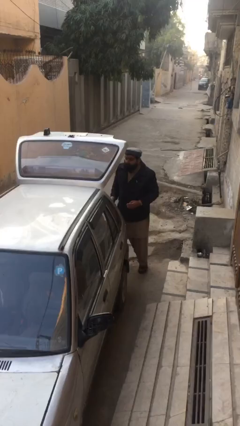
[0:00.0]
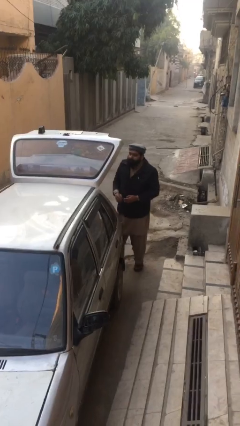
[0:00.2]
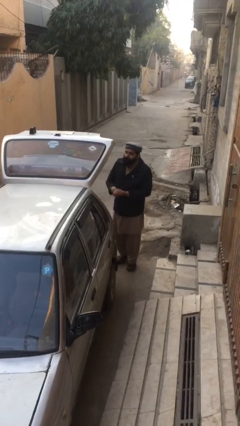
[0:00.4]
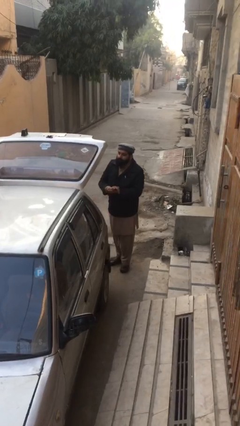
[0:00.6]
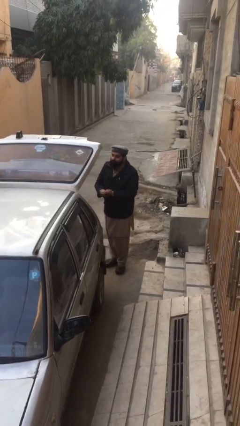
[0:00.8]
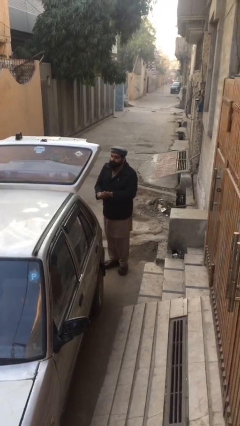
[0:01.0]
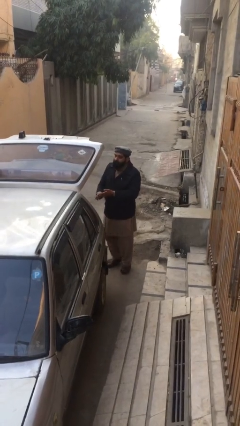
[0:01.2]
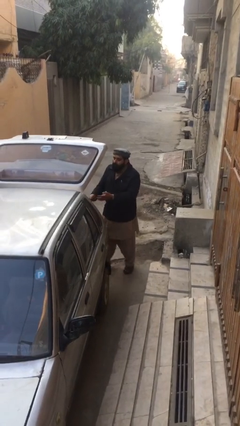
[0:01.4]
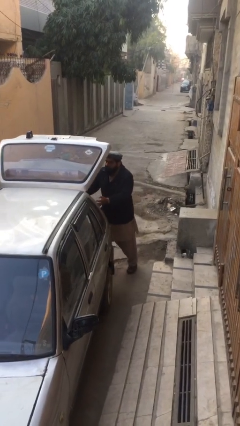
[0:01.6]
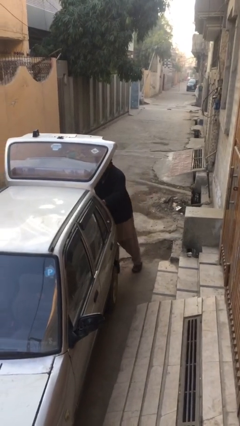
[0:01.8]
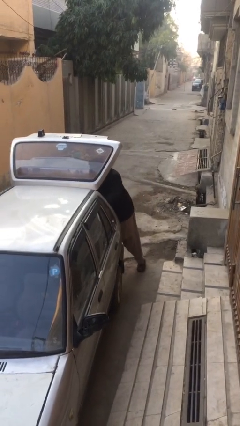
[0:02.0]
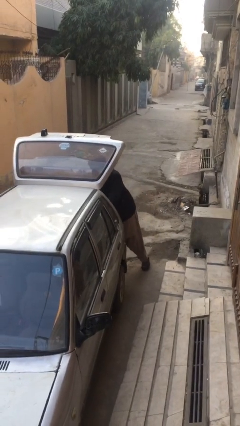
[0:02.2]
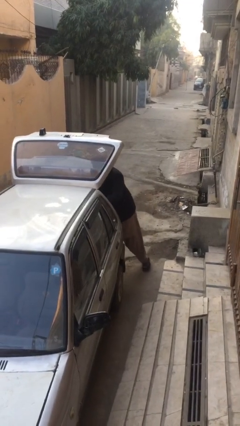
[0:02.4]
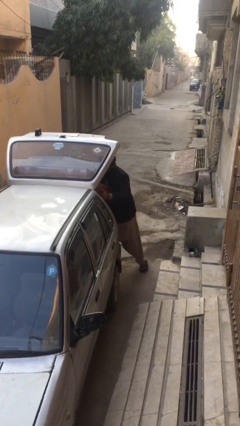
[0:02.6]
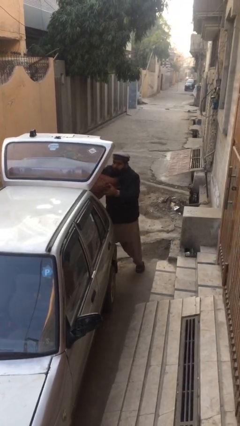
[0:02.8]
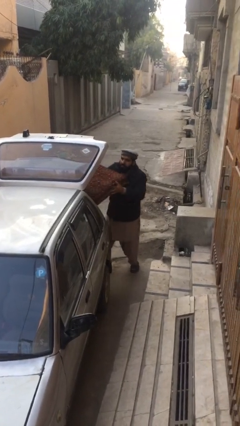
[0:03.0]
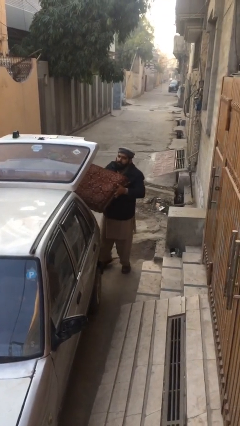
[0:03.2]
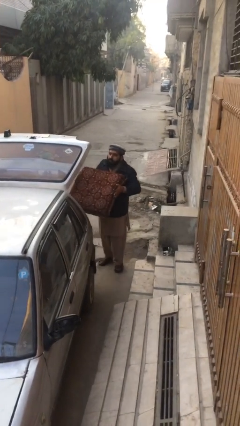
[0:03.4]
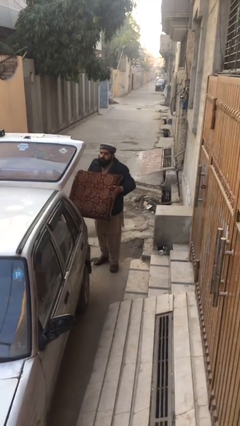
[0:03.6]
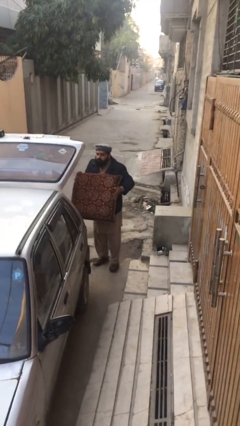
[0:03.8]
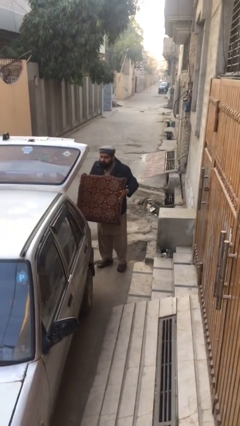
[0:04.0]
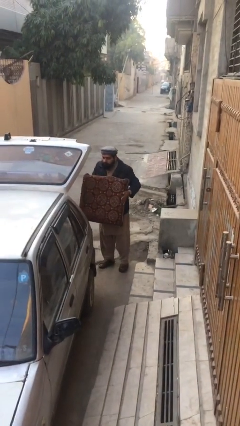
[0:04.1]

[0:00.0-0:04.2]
person unloads car

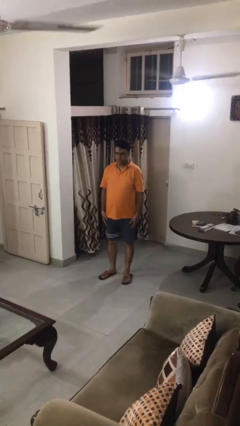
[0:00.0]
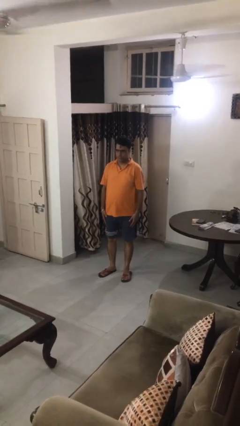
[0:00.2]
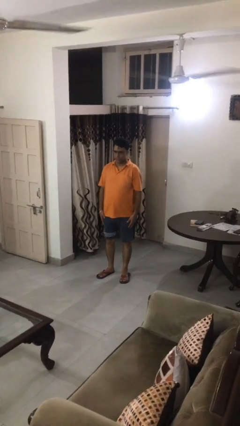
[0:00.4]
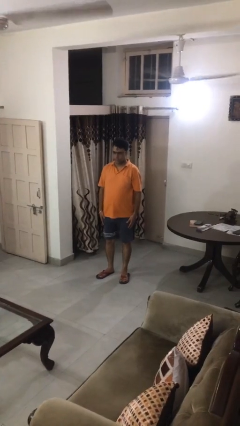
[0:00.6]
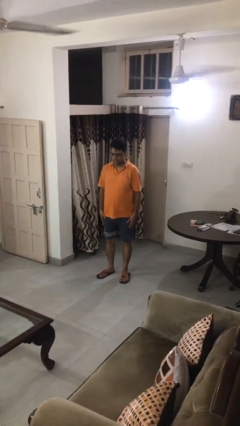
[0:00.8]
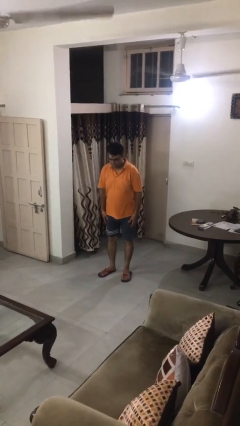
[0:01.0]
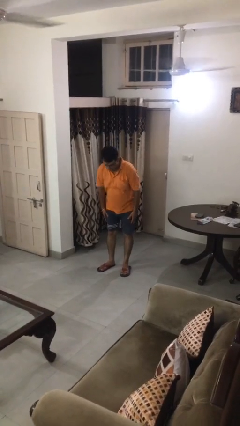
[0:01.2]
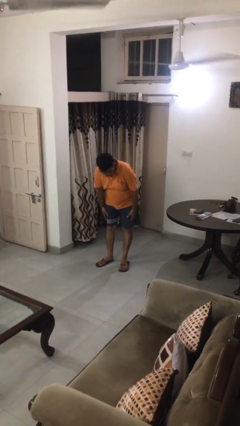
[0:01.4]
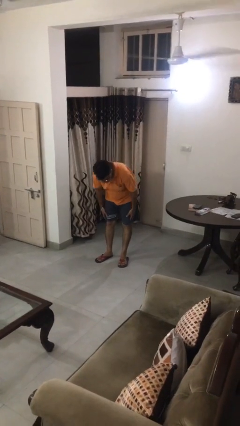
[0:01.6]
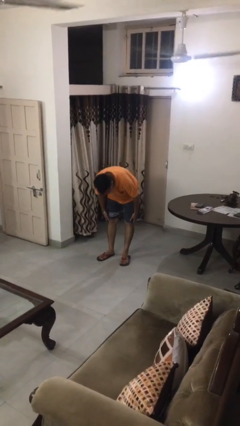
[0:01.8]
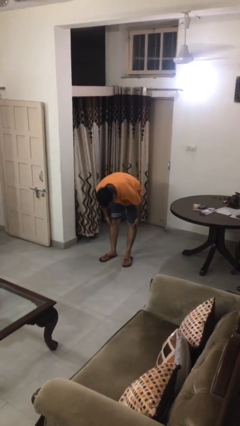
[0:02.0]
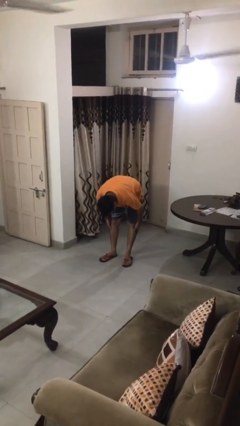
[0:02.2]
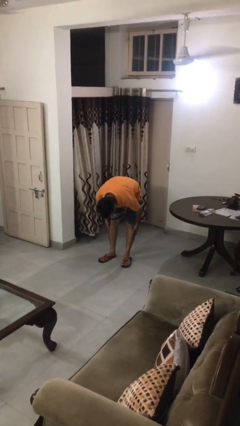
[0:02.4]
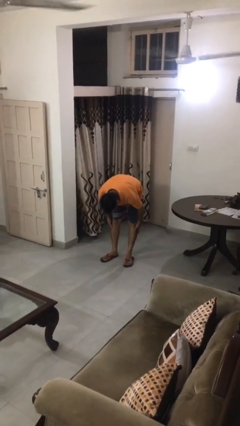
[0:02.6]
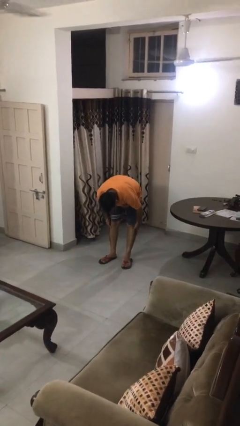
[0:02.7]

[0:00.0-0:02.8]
person bows

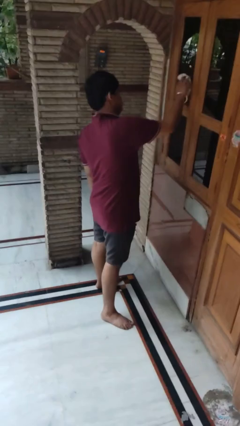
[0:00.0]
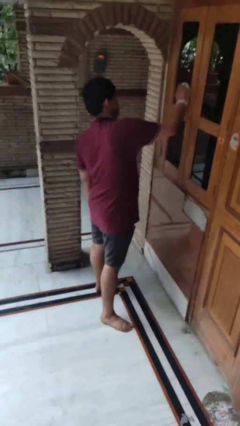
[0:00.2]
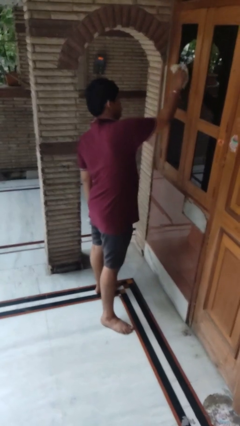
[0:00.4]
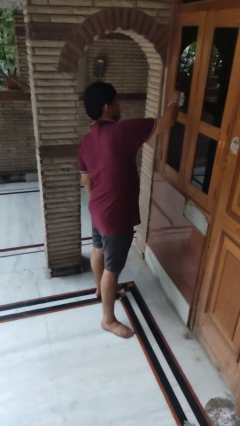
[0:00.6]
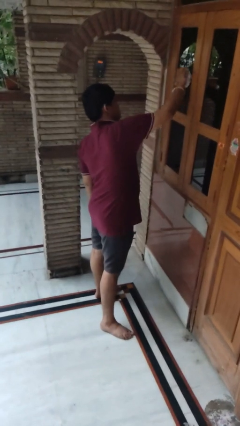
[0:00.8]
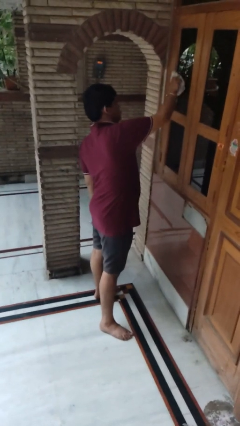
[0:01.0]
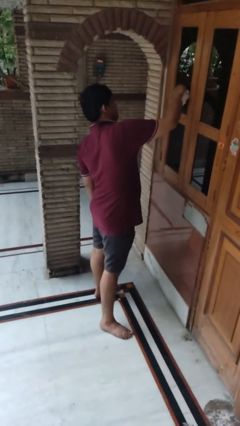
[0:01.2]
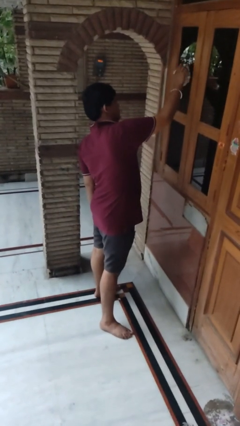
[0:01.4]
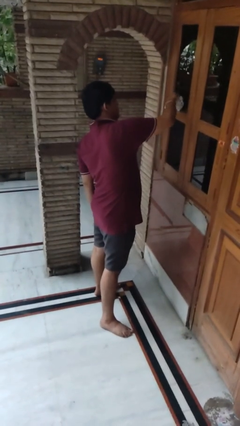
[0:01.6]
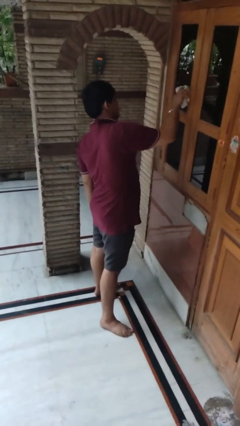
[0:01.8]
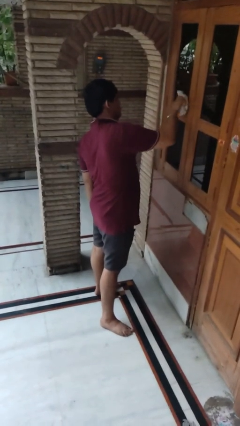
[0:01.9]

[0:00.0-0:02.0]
person washes window

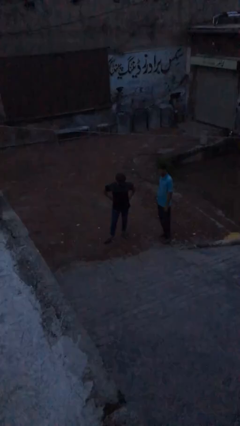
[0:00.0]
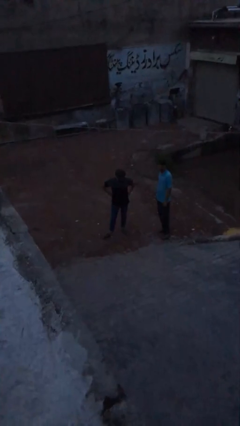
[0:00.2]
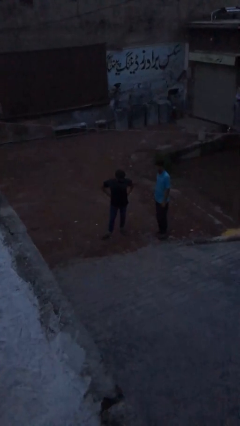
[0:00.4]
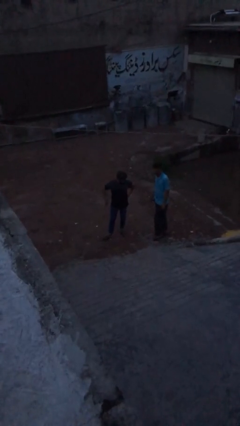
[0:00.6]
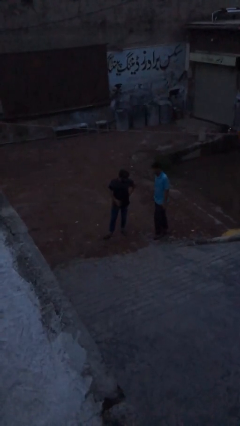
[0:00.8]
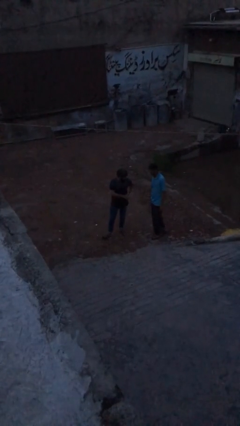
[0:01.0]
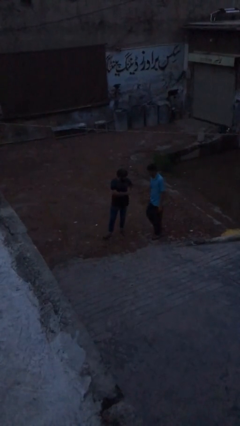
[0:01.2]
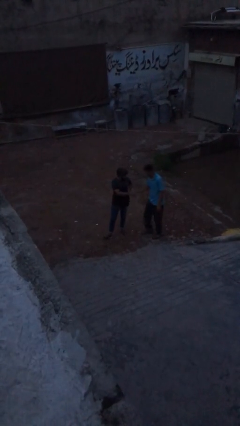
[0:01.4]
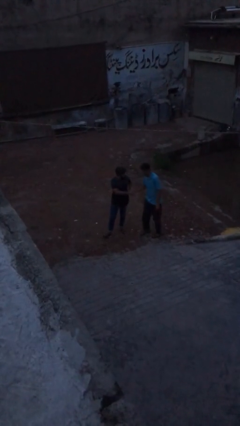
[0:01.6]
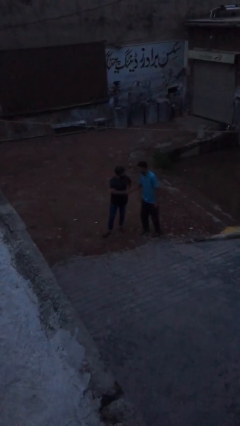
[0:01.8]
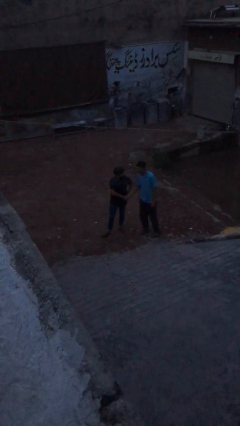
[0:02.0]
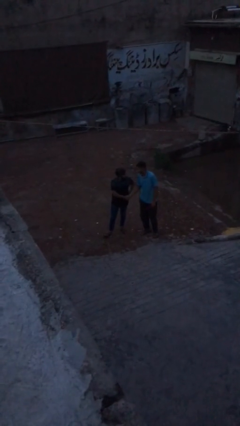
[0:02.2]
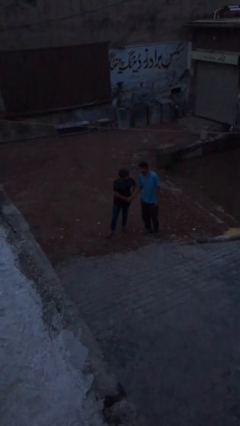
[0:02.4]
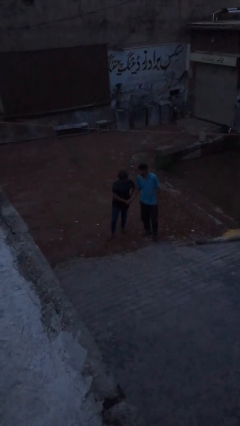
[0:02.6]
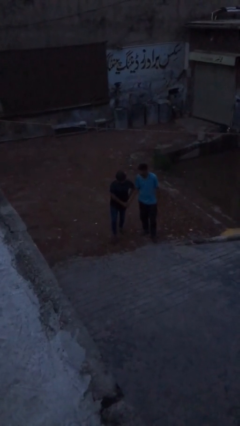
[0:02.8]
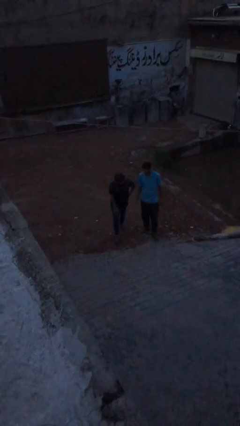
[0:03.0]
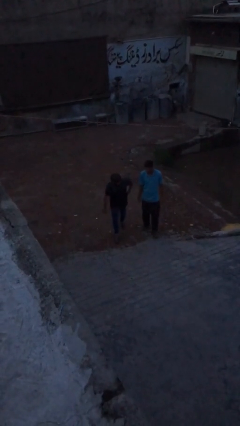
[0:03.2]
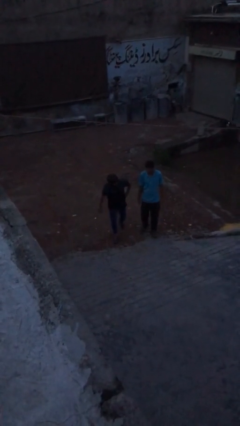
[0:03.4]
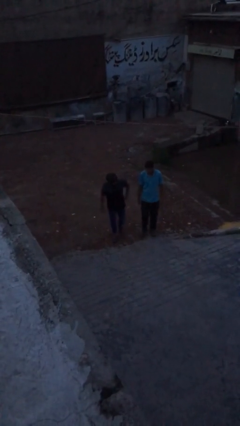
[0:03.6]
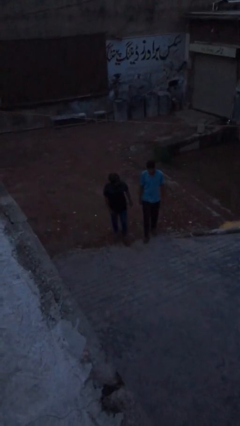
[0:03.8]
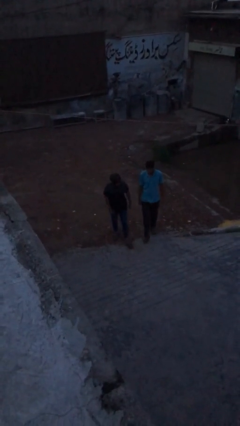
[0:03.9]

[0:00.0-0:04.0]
person shakes hand

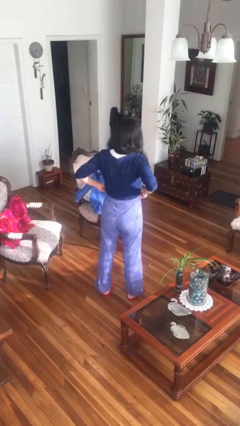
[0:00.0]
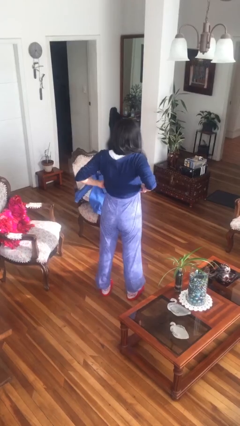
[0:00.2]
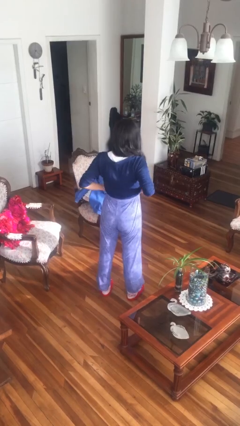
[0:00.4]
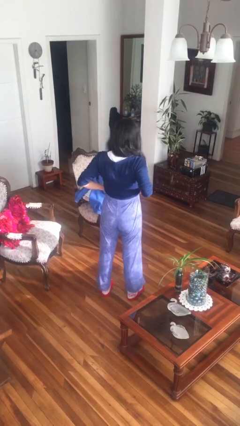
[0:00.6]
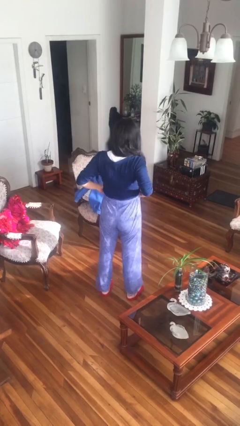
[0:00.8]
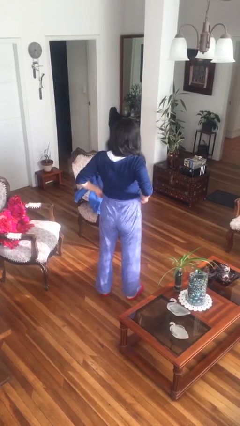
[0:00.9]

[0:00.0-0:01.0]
person hikes up pants

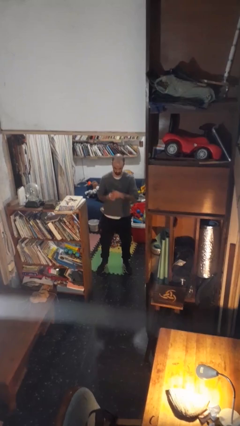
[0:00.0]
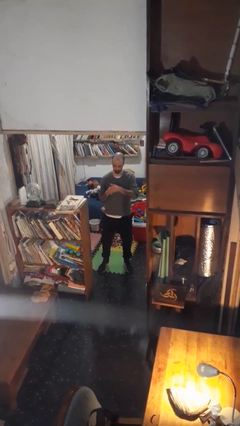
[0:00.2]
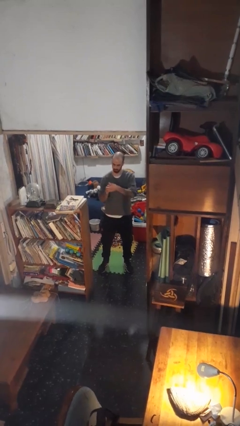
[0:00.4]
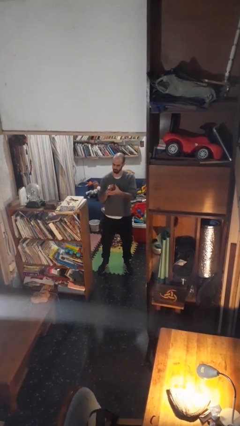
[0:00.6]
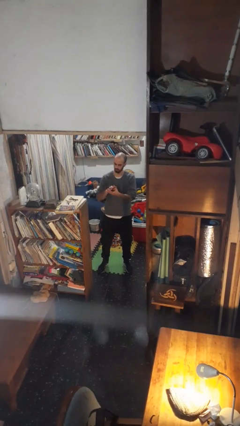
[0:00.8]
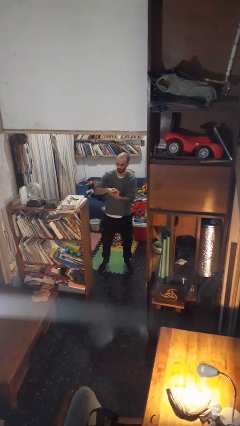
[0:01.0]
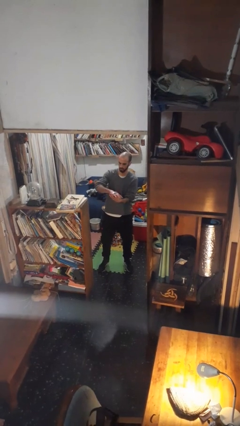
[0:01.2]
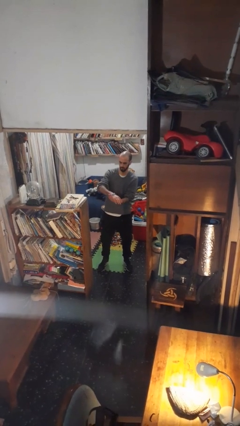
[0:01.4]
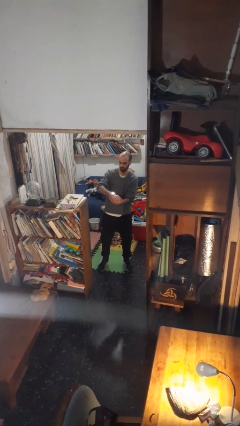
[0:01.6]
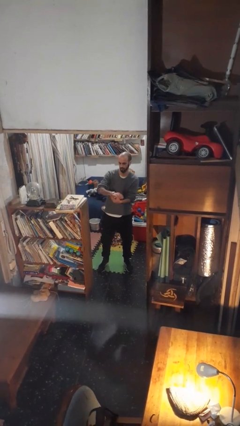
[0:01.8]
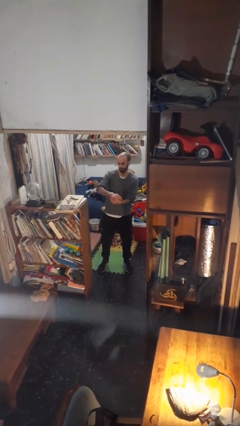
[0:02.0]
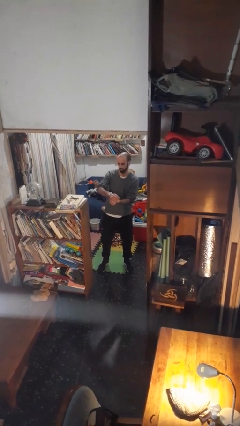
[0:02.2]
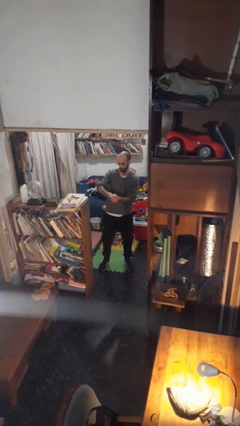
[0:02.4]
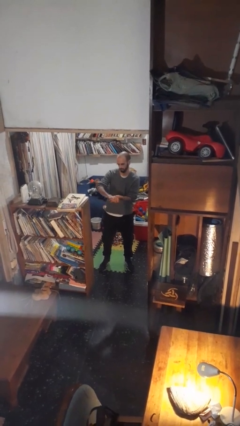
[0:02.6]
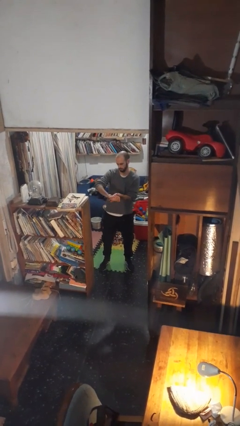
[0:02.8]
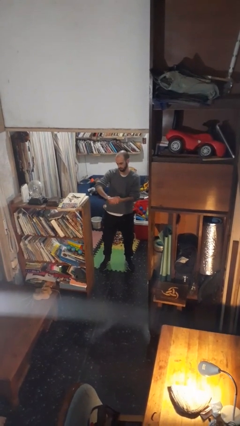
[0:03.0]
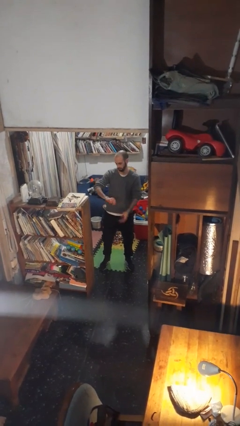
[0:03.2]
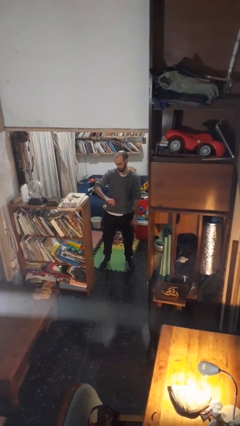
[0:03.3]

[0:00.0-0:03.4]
person puts on wristwatch
